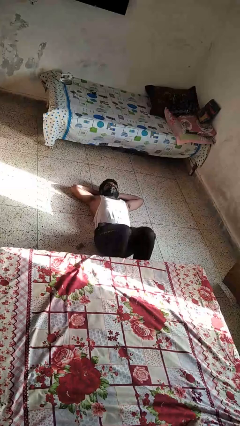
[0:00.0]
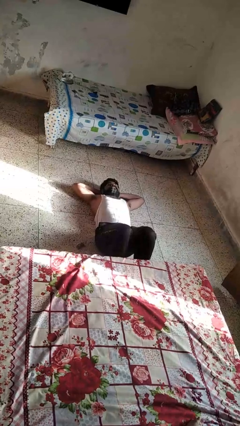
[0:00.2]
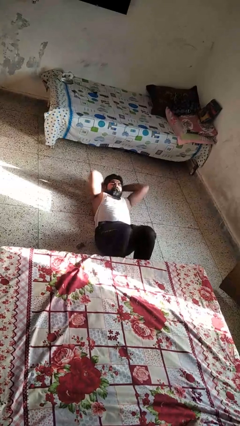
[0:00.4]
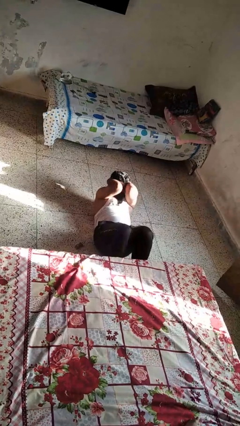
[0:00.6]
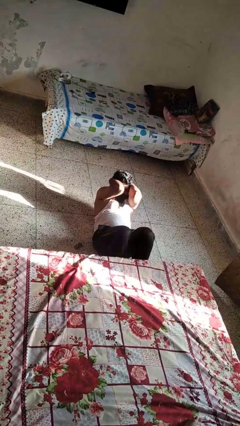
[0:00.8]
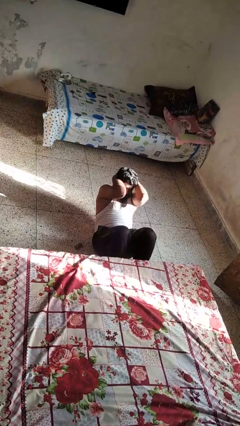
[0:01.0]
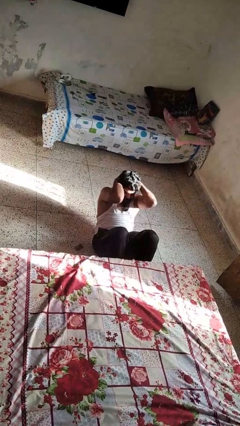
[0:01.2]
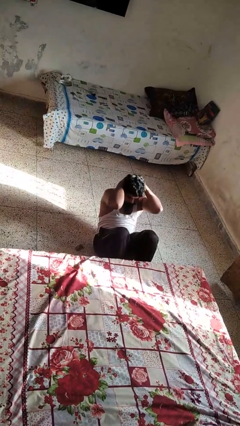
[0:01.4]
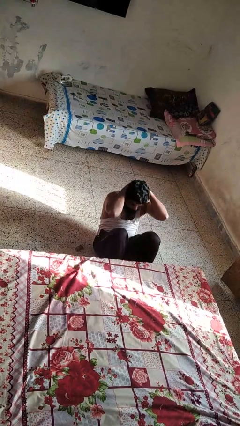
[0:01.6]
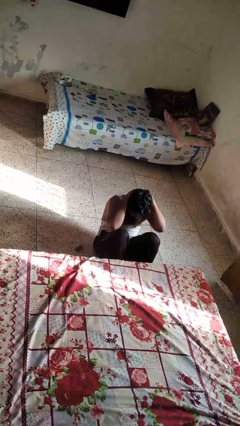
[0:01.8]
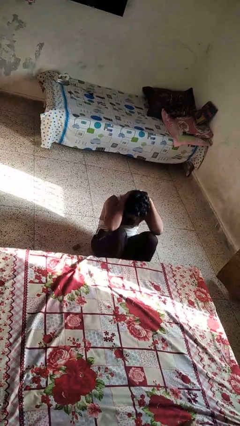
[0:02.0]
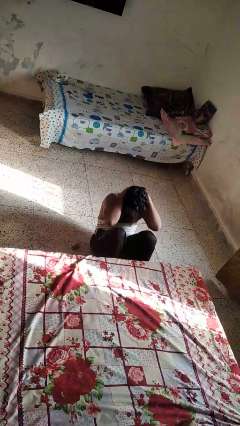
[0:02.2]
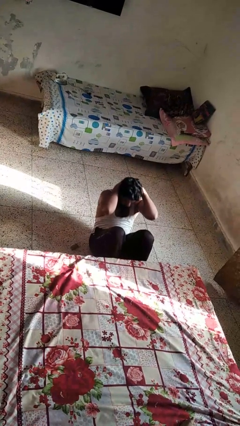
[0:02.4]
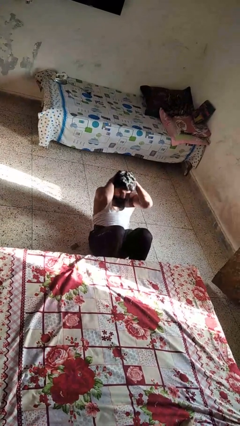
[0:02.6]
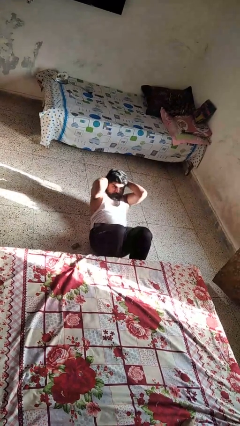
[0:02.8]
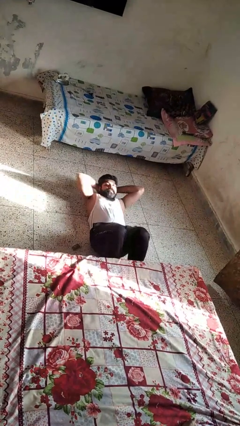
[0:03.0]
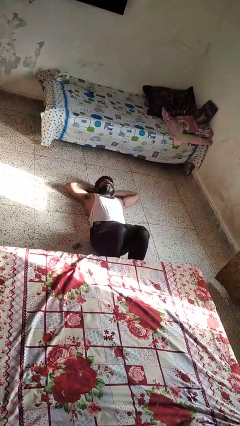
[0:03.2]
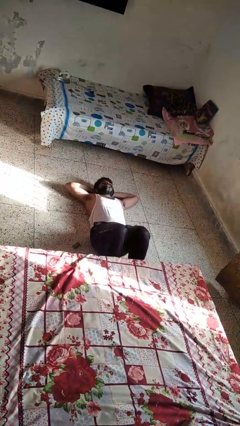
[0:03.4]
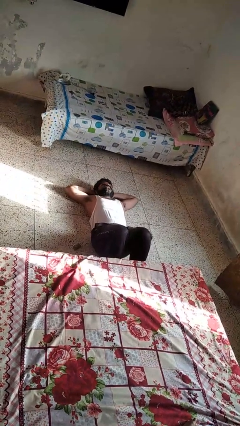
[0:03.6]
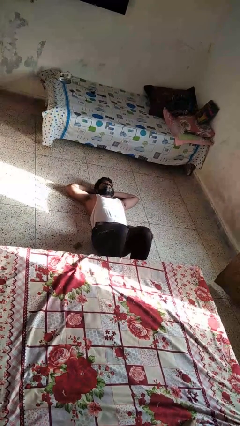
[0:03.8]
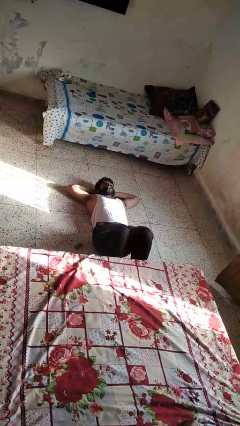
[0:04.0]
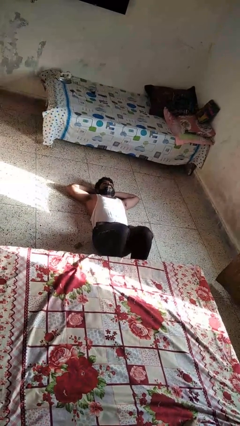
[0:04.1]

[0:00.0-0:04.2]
person exercises with situp

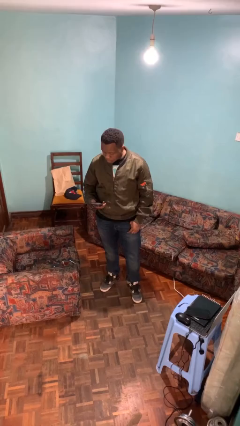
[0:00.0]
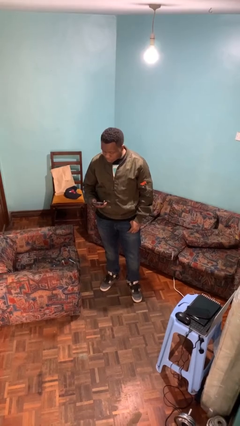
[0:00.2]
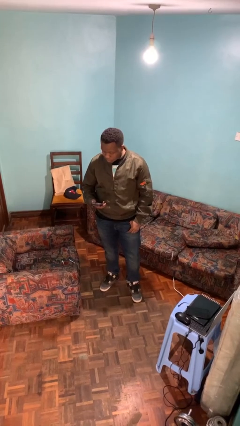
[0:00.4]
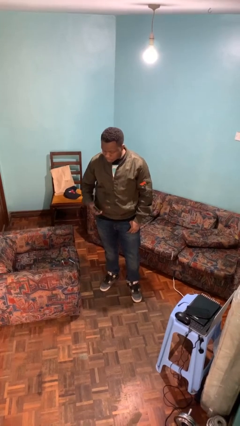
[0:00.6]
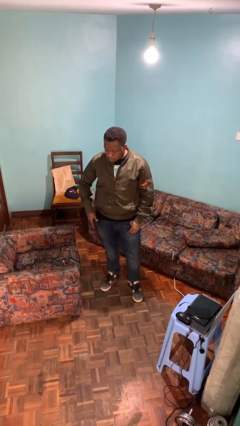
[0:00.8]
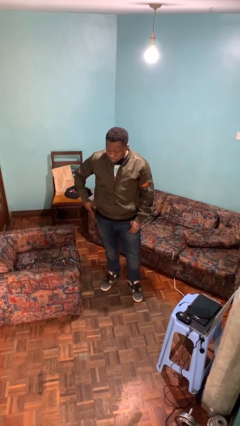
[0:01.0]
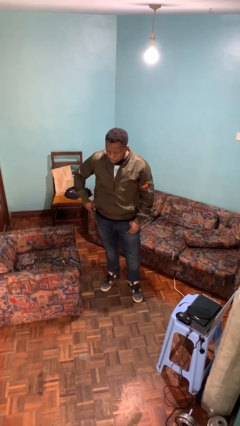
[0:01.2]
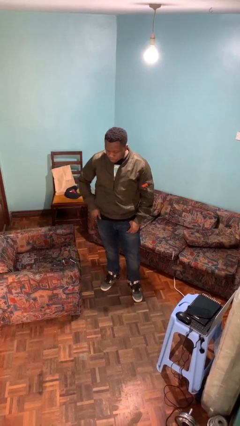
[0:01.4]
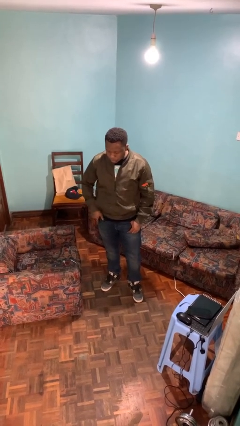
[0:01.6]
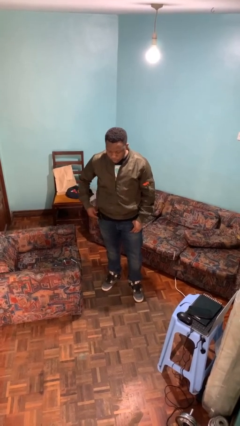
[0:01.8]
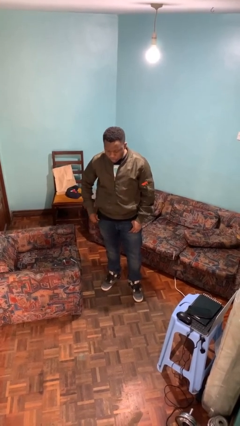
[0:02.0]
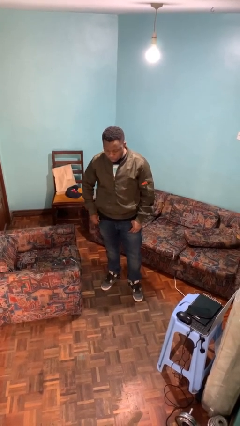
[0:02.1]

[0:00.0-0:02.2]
person puts phone into pocket

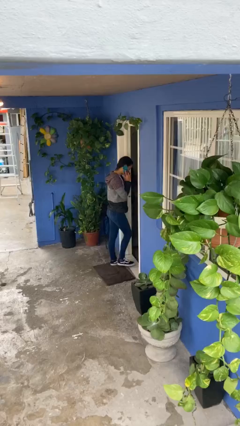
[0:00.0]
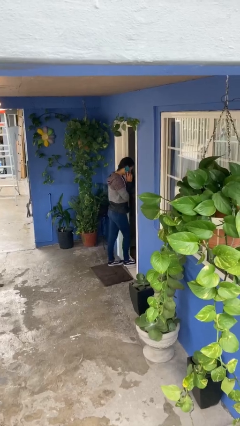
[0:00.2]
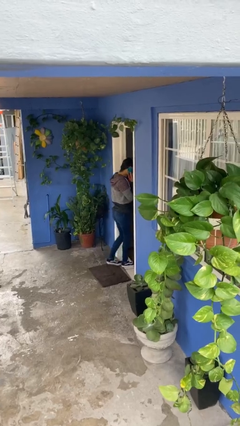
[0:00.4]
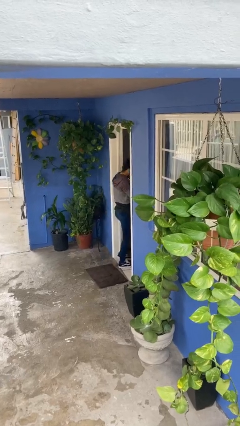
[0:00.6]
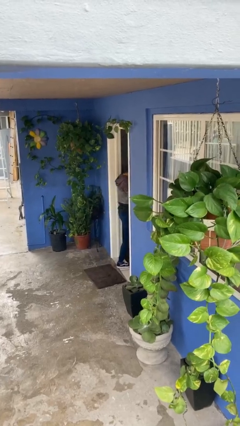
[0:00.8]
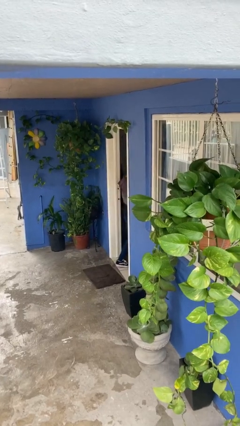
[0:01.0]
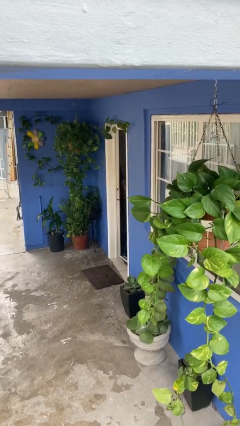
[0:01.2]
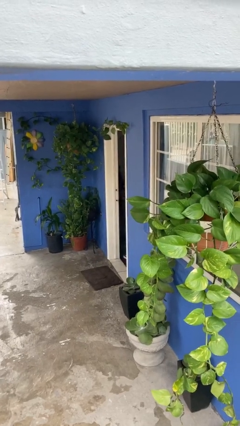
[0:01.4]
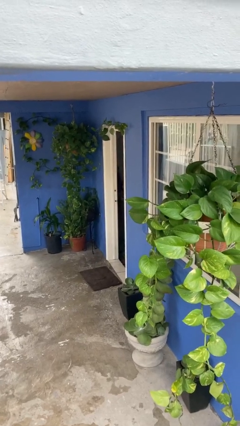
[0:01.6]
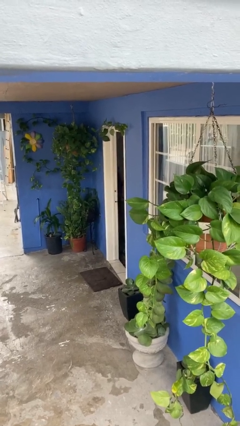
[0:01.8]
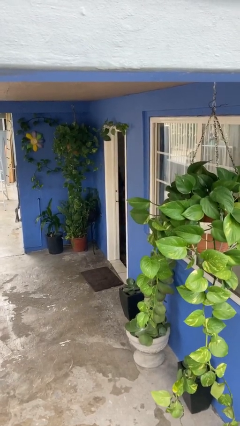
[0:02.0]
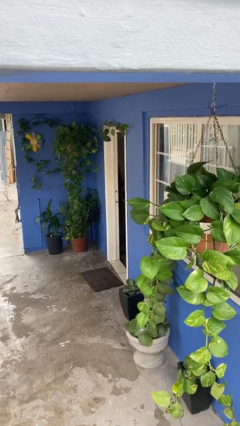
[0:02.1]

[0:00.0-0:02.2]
person exits scene through structure

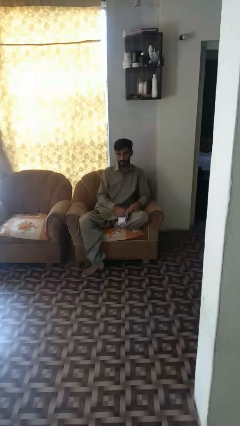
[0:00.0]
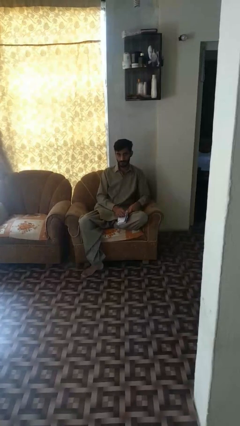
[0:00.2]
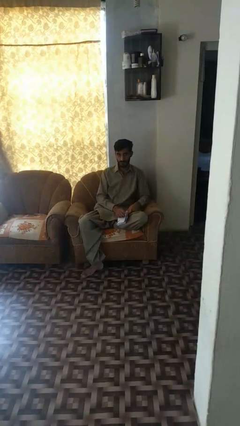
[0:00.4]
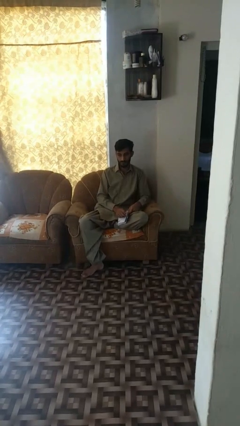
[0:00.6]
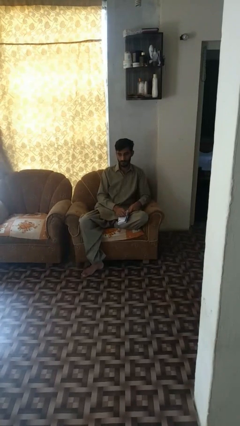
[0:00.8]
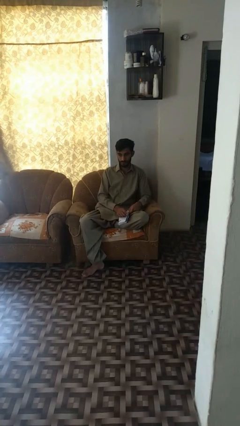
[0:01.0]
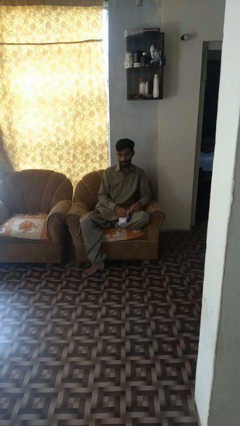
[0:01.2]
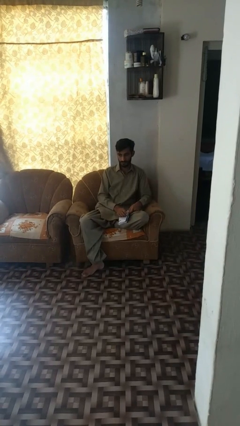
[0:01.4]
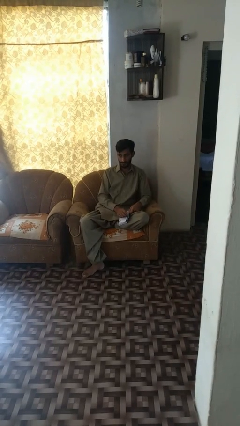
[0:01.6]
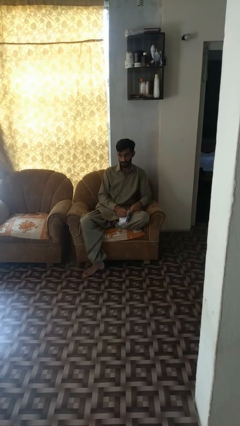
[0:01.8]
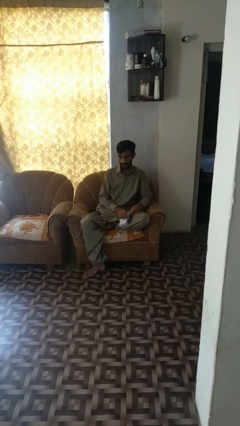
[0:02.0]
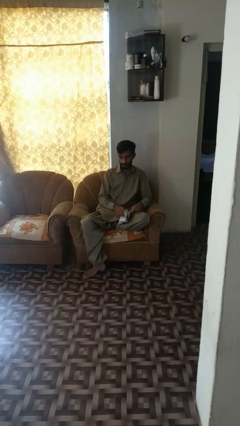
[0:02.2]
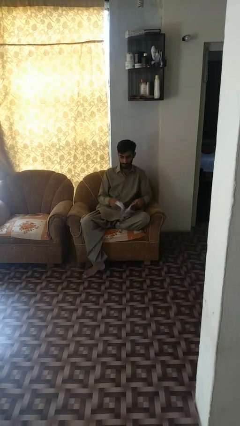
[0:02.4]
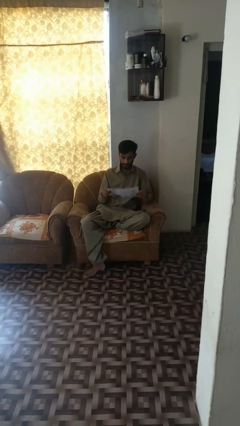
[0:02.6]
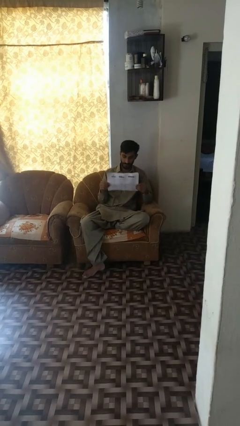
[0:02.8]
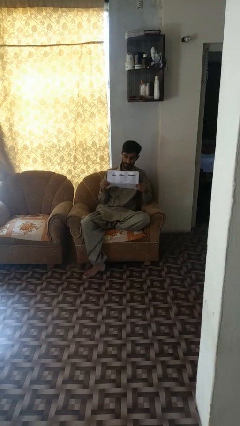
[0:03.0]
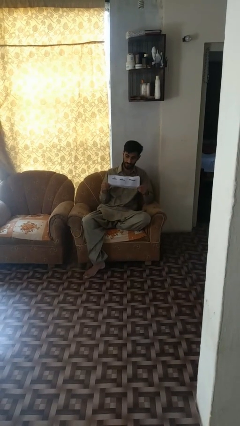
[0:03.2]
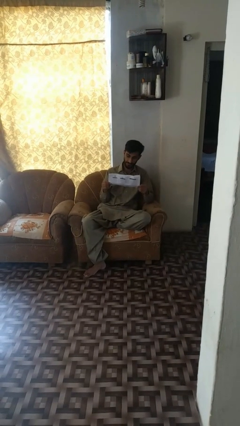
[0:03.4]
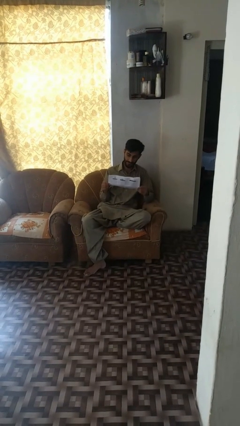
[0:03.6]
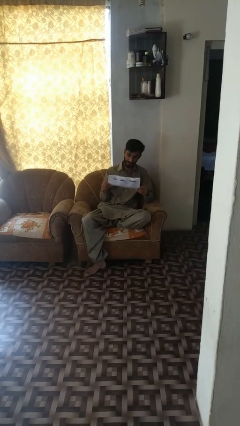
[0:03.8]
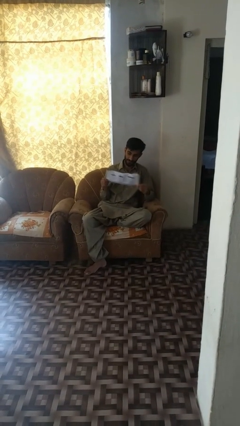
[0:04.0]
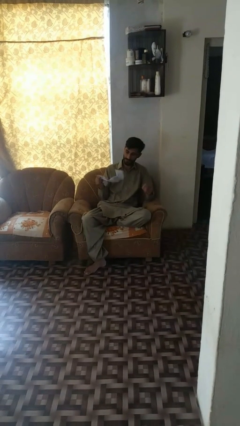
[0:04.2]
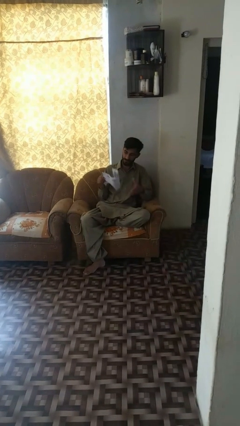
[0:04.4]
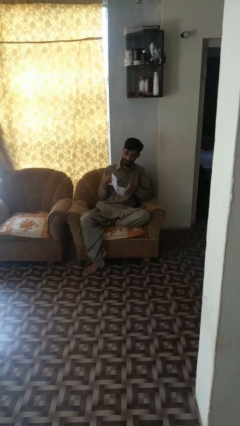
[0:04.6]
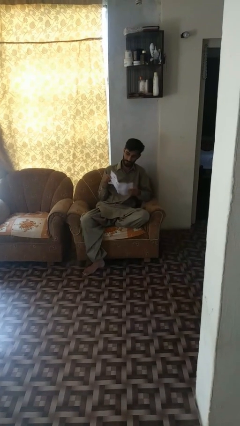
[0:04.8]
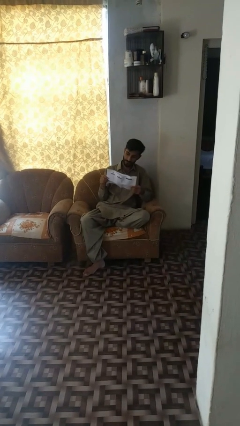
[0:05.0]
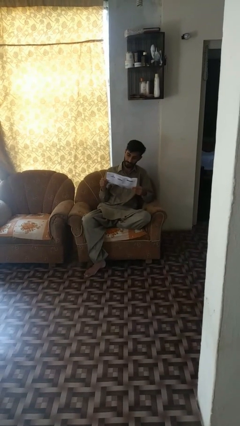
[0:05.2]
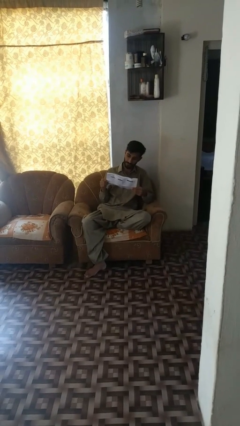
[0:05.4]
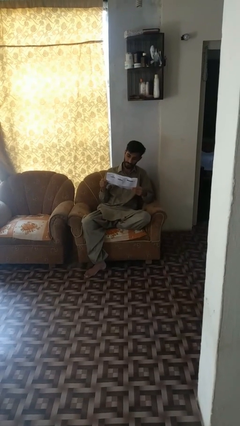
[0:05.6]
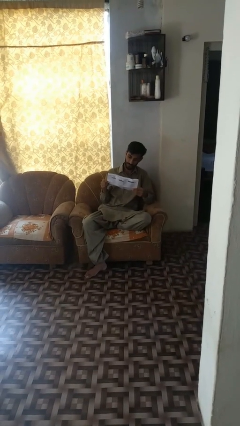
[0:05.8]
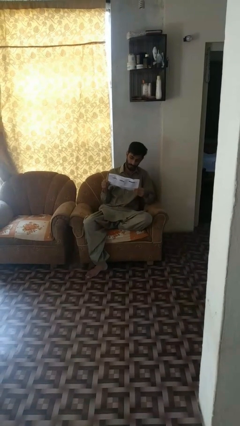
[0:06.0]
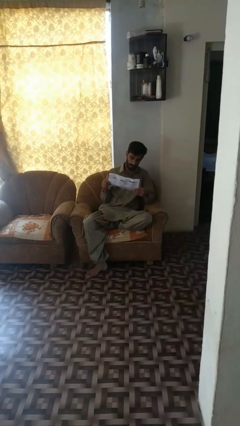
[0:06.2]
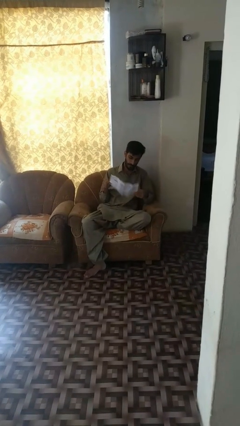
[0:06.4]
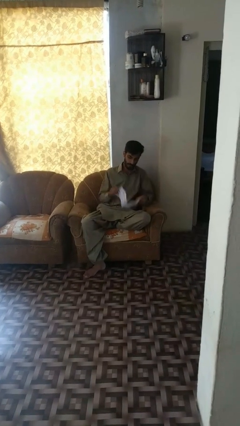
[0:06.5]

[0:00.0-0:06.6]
person reads newspaper

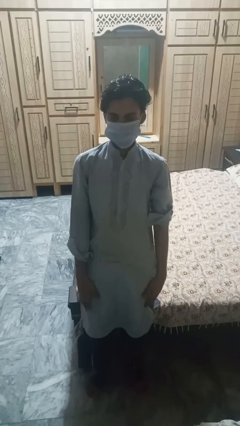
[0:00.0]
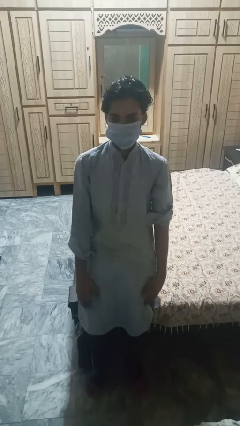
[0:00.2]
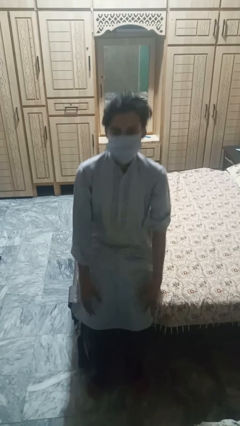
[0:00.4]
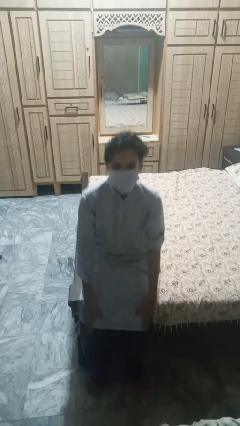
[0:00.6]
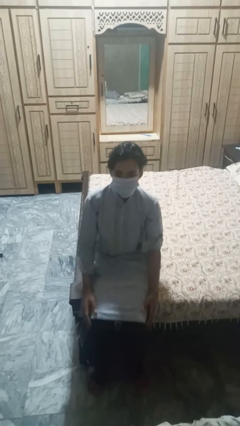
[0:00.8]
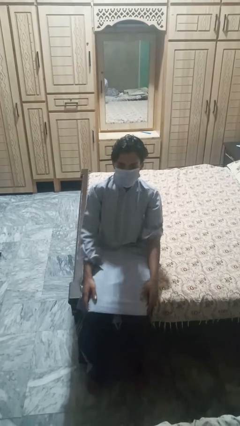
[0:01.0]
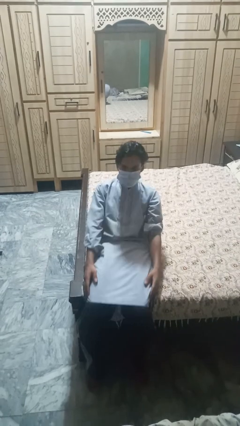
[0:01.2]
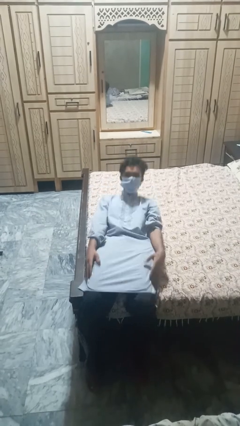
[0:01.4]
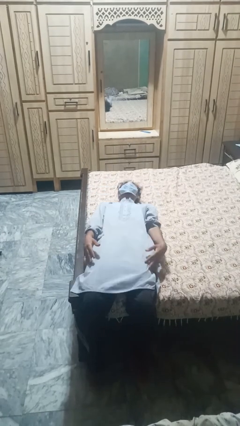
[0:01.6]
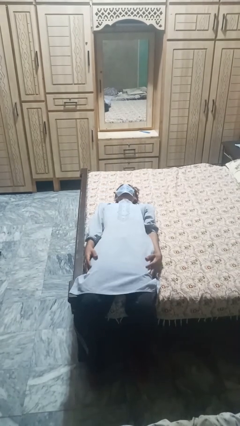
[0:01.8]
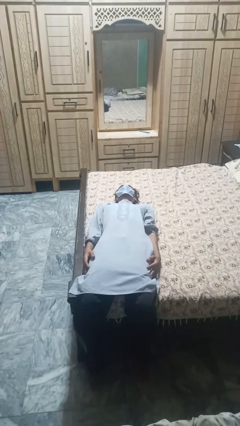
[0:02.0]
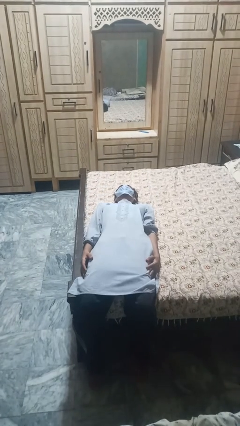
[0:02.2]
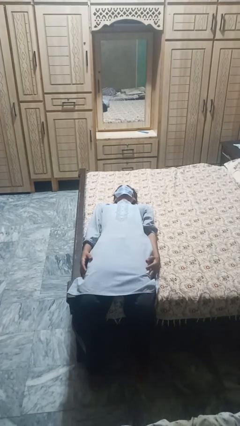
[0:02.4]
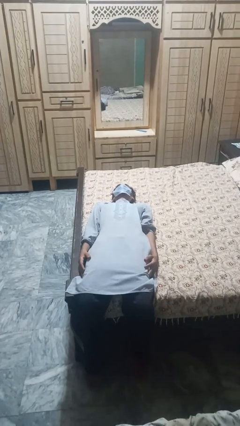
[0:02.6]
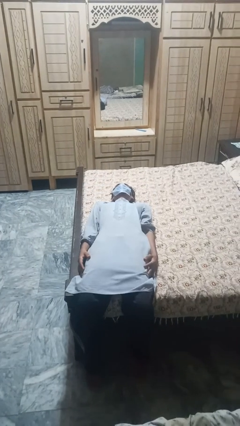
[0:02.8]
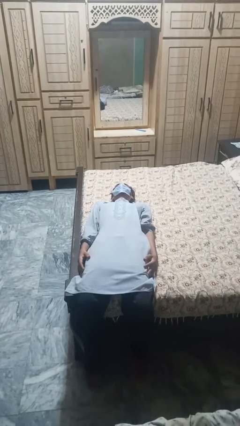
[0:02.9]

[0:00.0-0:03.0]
person lies down on bed
